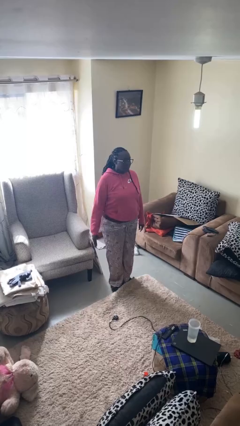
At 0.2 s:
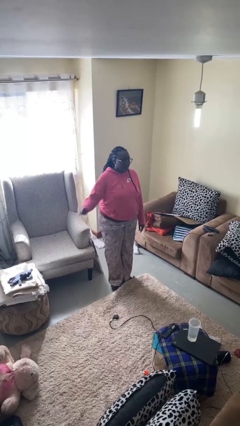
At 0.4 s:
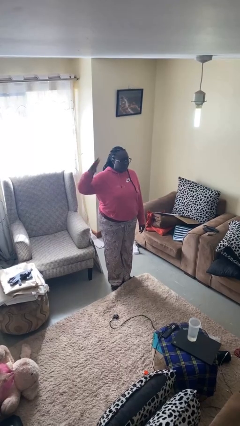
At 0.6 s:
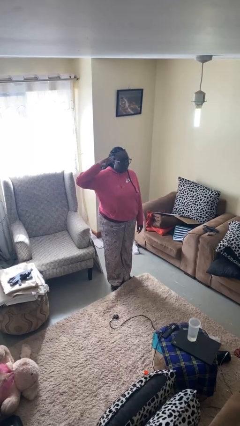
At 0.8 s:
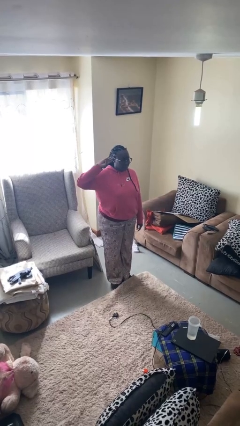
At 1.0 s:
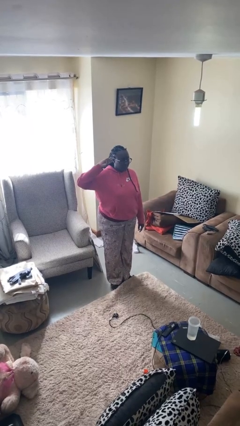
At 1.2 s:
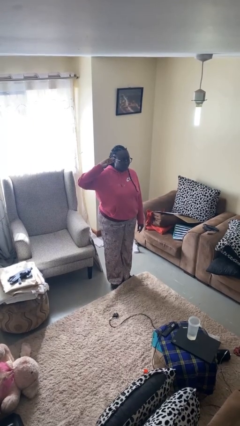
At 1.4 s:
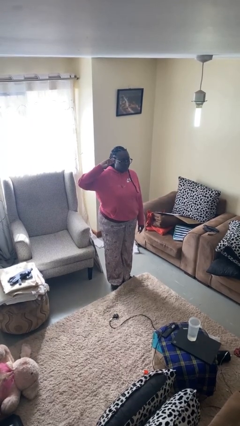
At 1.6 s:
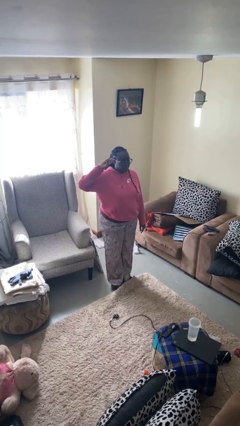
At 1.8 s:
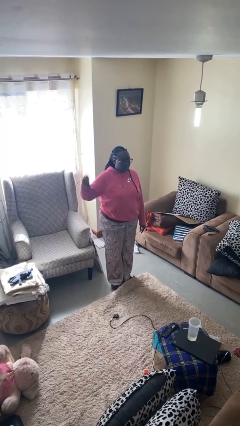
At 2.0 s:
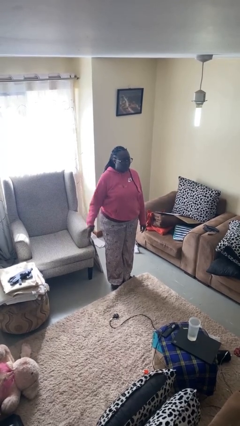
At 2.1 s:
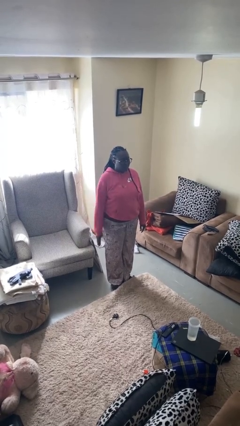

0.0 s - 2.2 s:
person salutes

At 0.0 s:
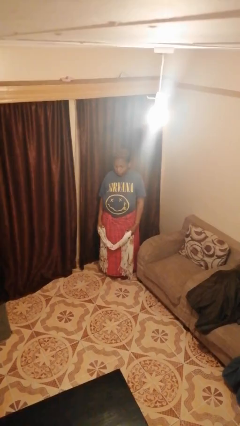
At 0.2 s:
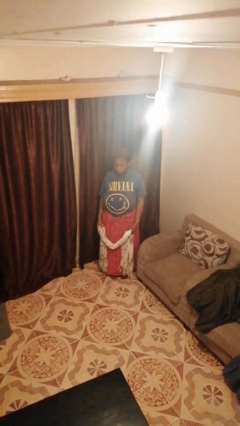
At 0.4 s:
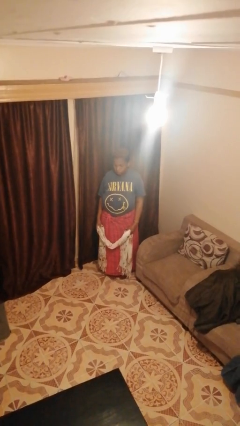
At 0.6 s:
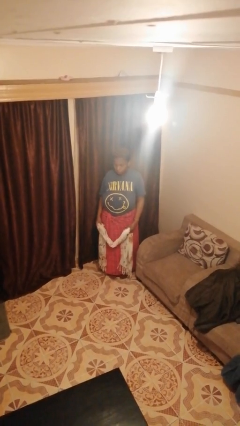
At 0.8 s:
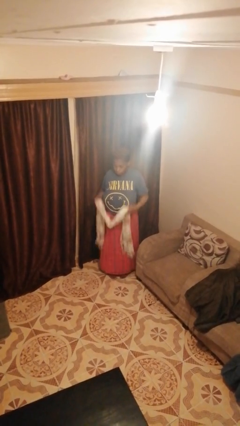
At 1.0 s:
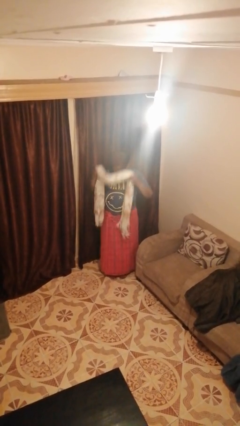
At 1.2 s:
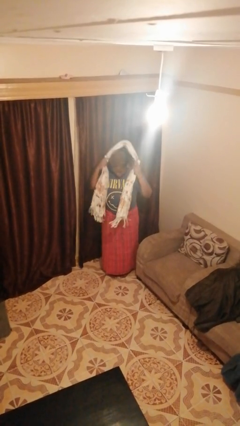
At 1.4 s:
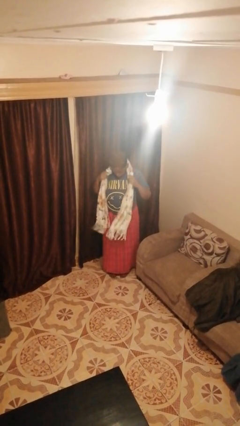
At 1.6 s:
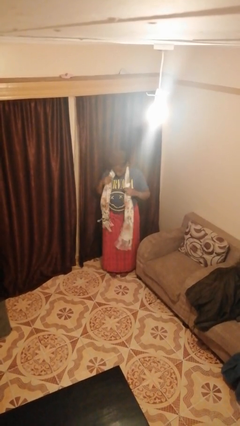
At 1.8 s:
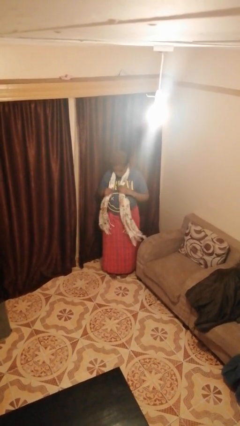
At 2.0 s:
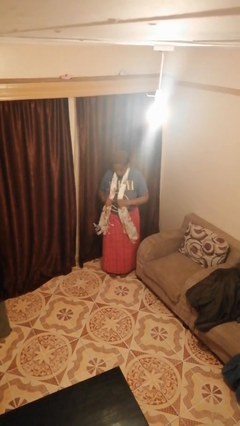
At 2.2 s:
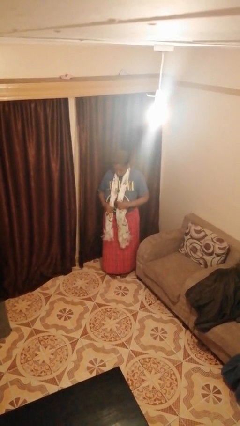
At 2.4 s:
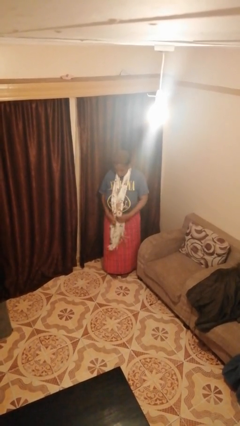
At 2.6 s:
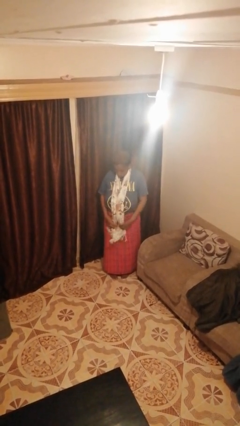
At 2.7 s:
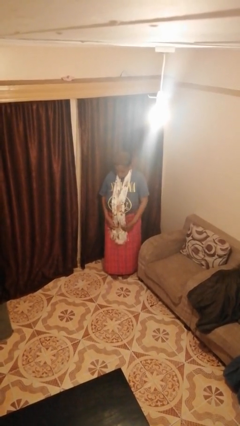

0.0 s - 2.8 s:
person puts on scarf

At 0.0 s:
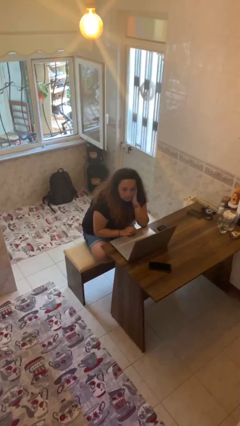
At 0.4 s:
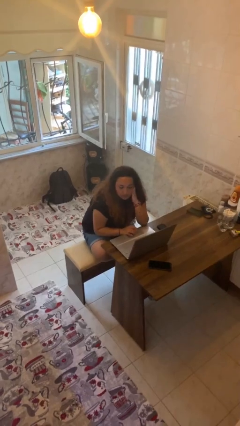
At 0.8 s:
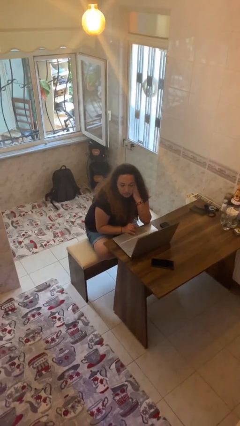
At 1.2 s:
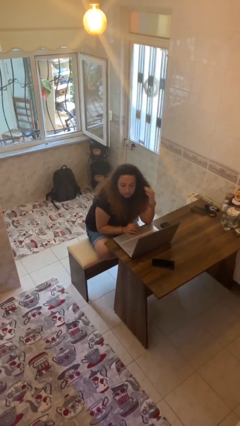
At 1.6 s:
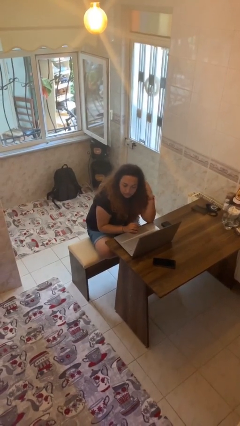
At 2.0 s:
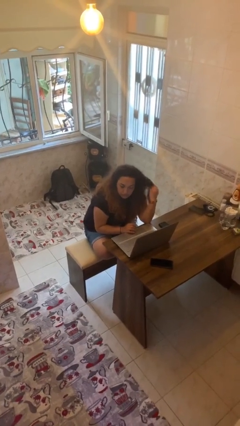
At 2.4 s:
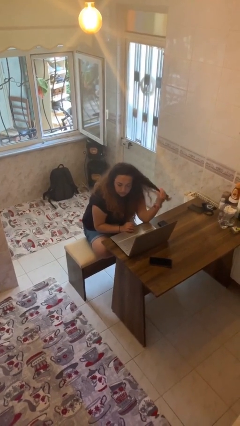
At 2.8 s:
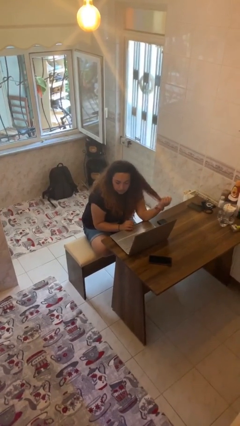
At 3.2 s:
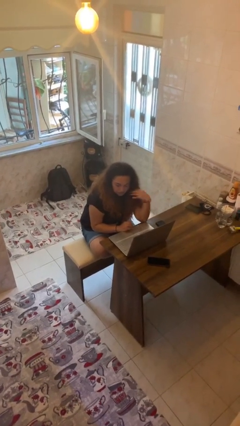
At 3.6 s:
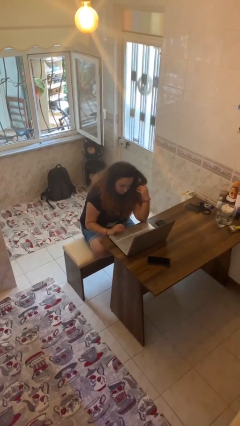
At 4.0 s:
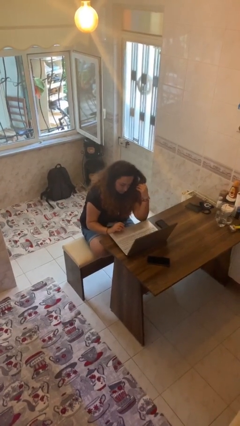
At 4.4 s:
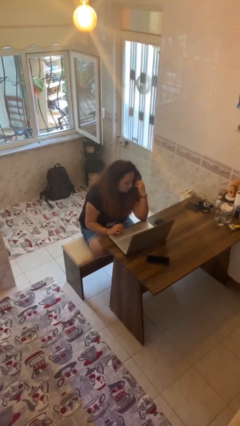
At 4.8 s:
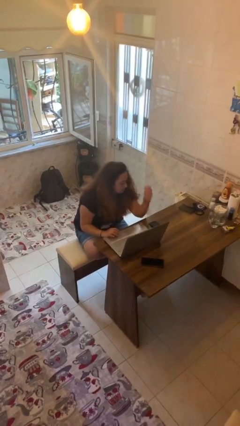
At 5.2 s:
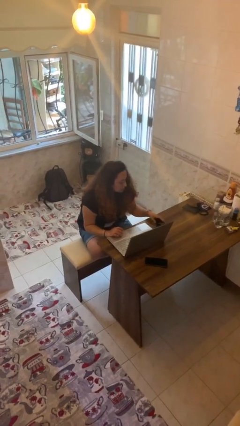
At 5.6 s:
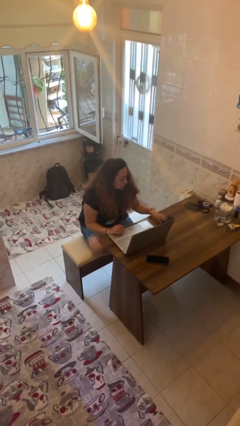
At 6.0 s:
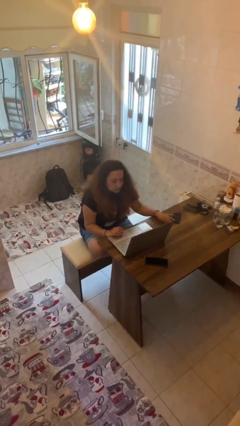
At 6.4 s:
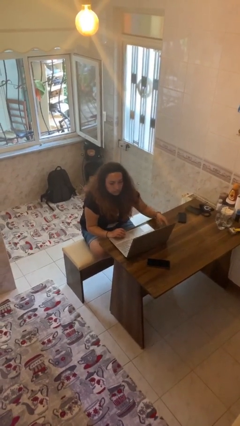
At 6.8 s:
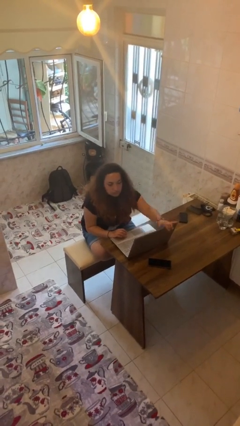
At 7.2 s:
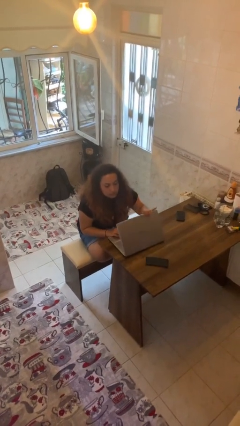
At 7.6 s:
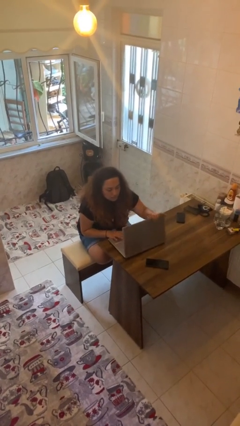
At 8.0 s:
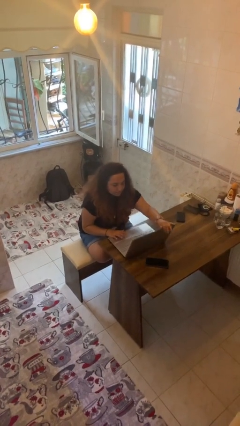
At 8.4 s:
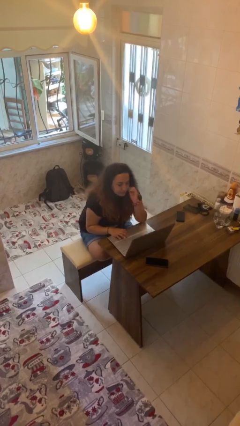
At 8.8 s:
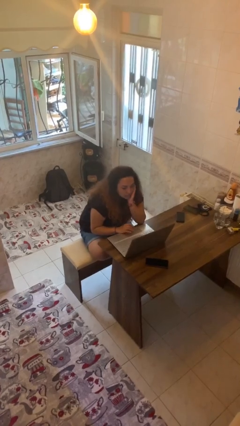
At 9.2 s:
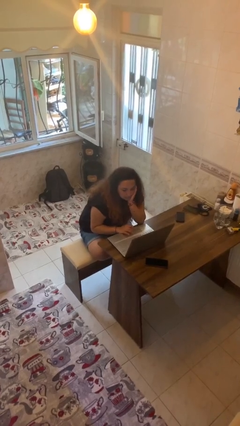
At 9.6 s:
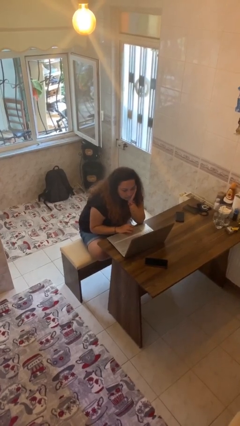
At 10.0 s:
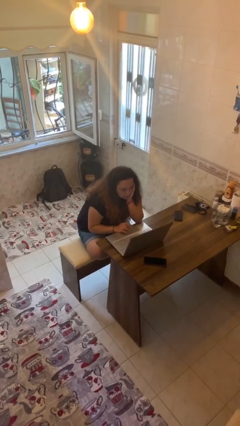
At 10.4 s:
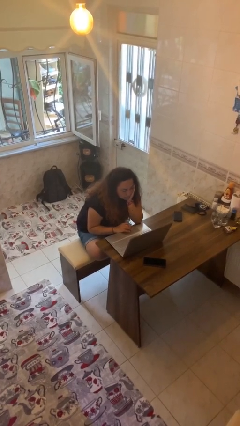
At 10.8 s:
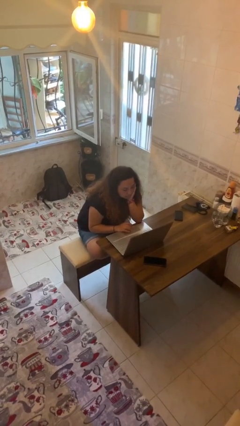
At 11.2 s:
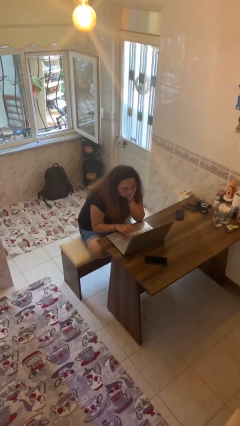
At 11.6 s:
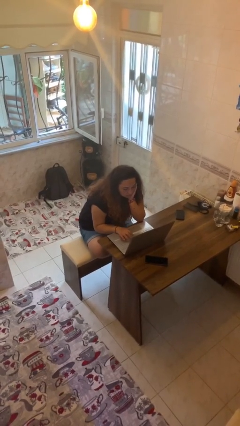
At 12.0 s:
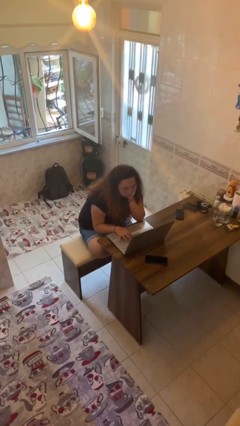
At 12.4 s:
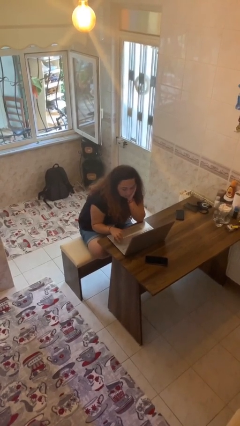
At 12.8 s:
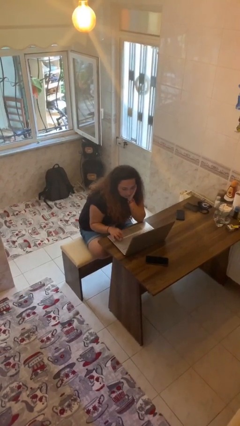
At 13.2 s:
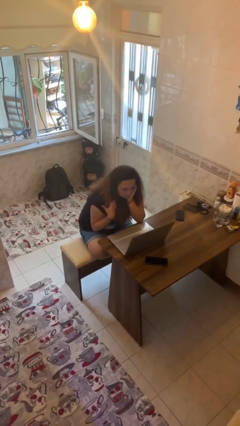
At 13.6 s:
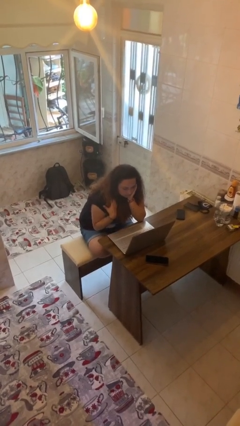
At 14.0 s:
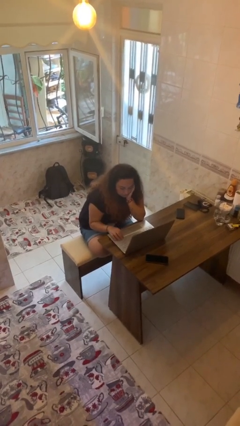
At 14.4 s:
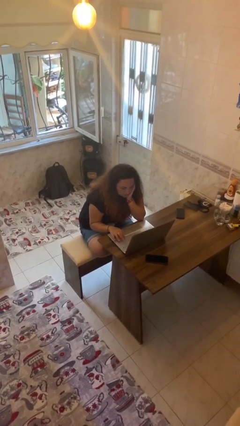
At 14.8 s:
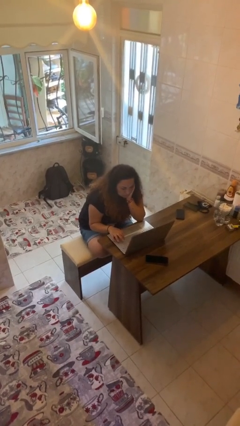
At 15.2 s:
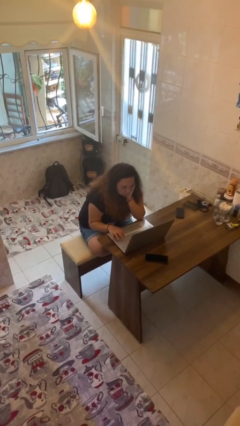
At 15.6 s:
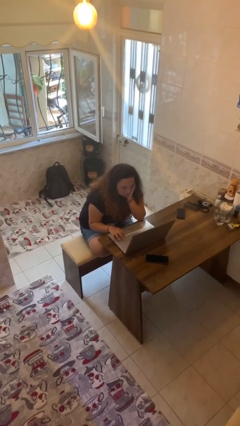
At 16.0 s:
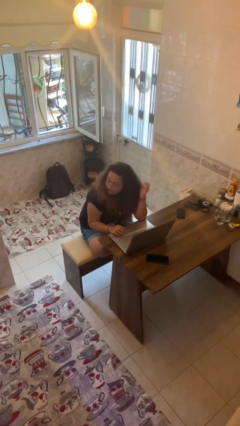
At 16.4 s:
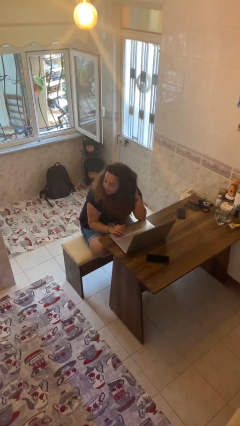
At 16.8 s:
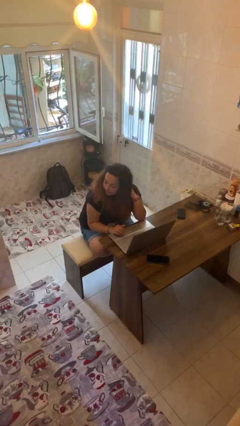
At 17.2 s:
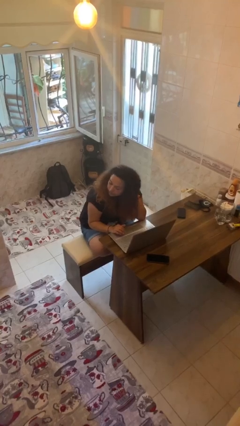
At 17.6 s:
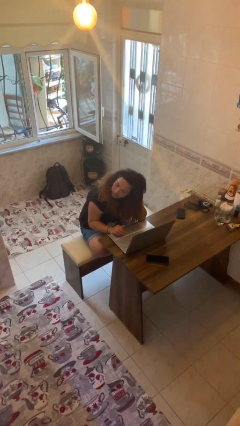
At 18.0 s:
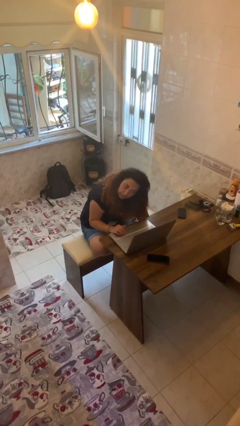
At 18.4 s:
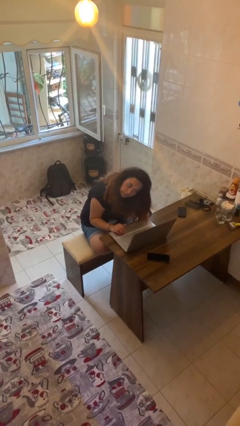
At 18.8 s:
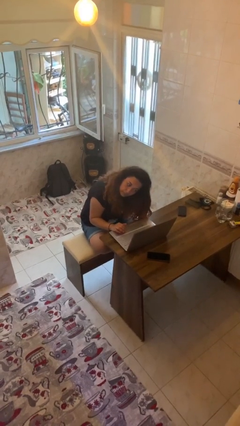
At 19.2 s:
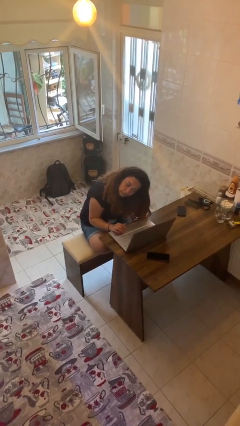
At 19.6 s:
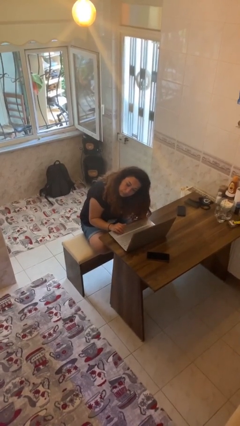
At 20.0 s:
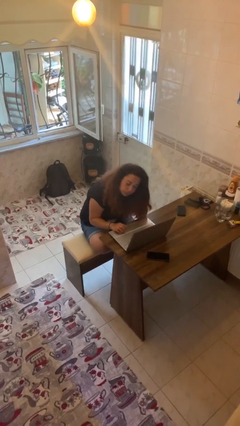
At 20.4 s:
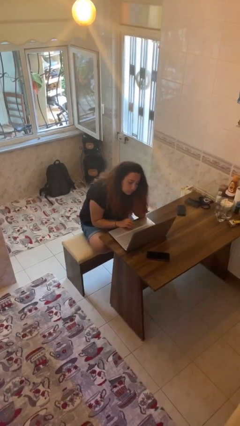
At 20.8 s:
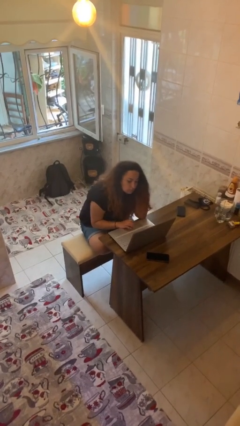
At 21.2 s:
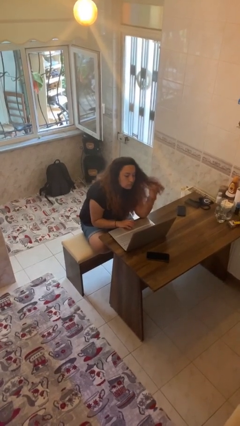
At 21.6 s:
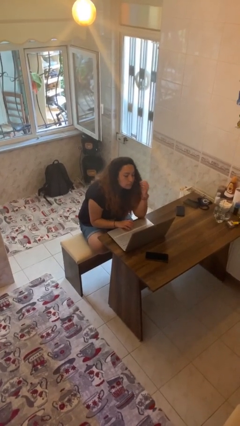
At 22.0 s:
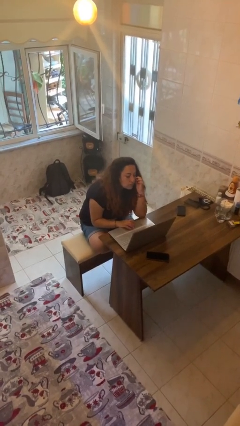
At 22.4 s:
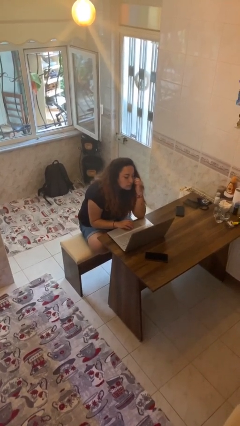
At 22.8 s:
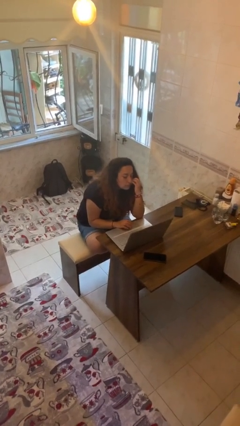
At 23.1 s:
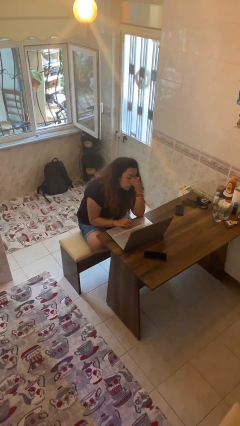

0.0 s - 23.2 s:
person interacts with laptop

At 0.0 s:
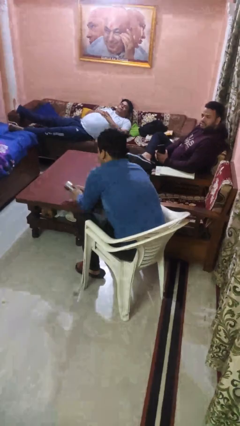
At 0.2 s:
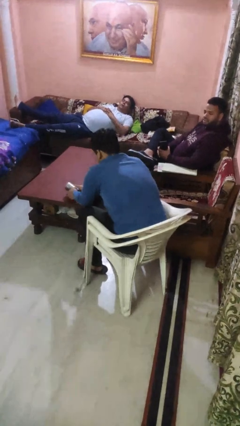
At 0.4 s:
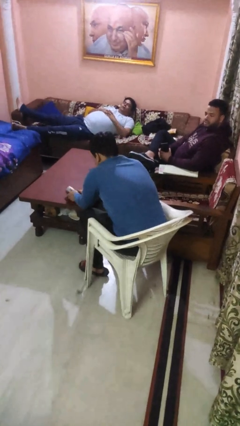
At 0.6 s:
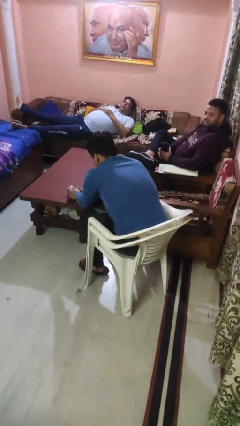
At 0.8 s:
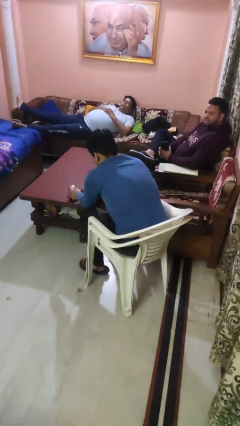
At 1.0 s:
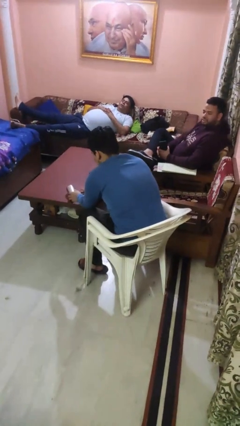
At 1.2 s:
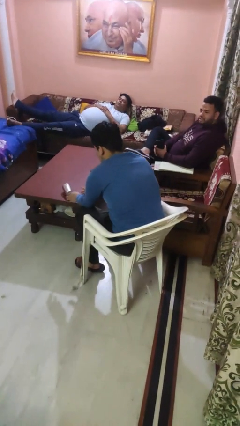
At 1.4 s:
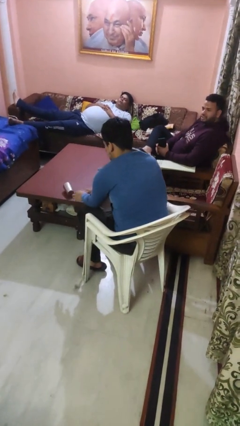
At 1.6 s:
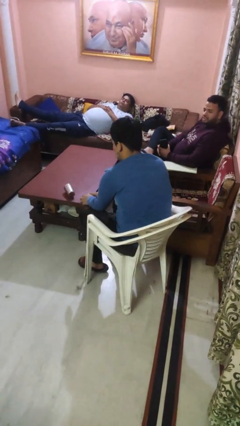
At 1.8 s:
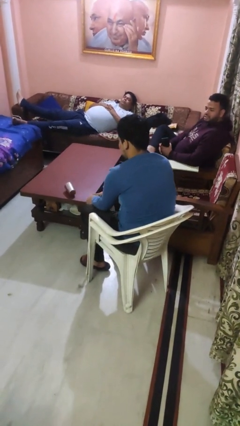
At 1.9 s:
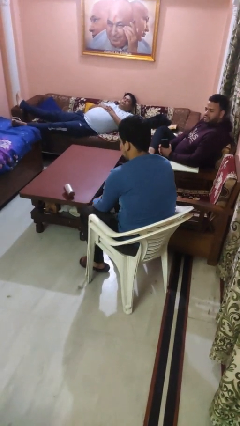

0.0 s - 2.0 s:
person spills on table
